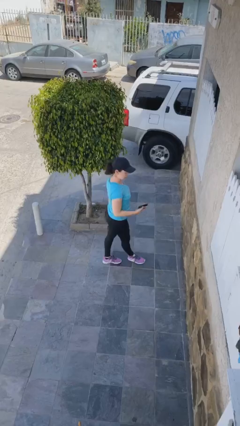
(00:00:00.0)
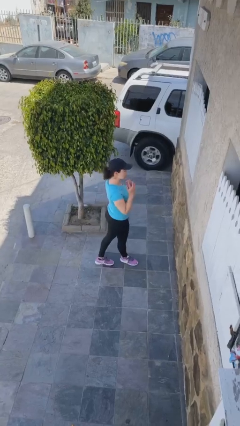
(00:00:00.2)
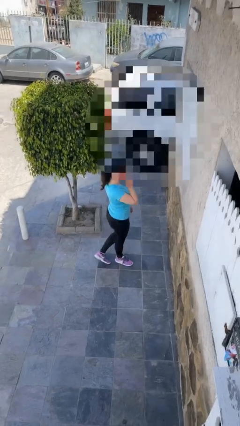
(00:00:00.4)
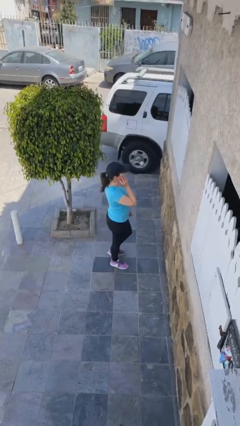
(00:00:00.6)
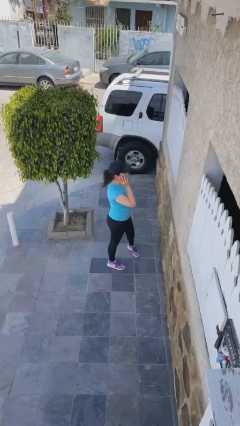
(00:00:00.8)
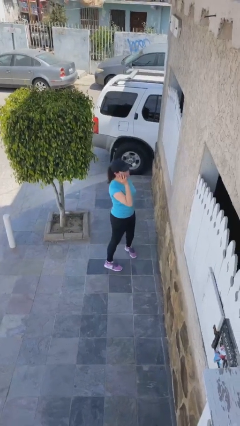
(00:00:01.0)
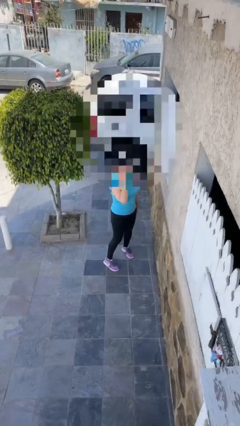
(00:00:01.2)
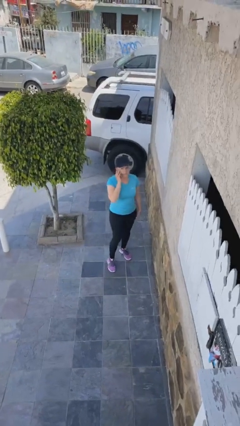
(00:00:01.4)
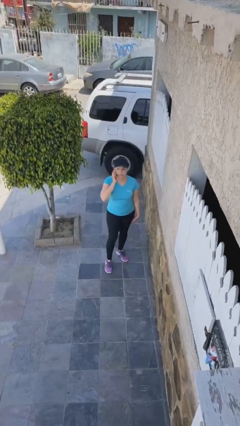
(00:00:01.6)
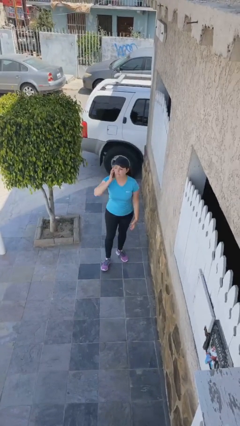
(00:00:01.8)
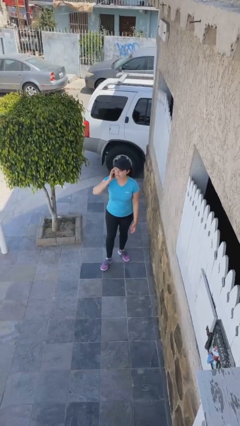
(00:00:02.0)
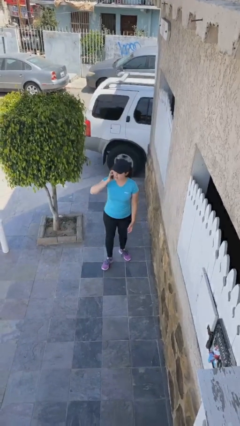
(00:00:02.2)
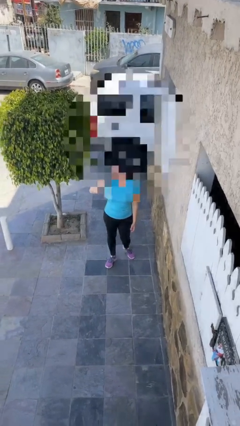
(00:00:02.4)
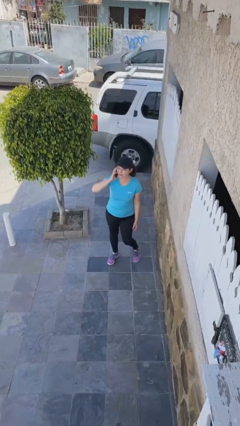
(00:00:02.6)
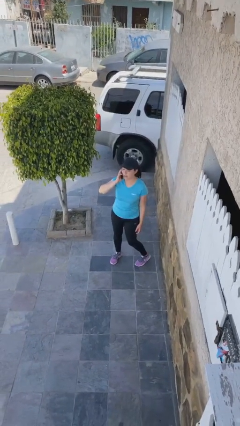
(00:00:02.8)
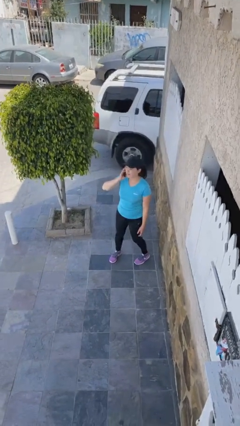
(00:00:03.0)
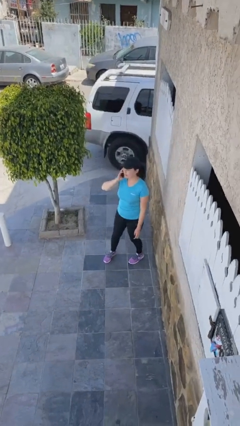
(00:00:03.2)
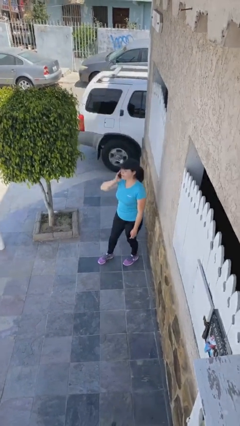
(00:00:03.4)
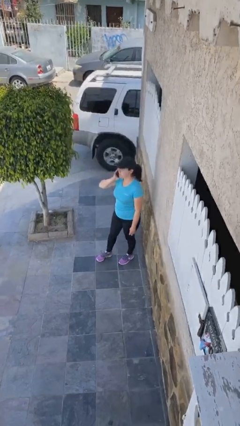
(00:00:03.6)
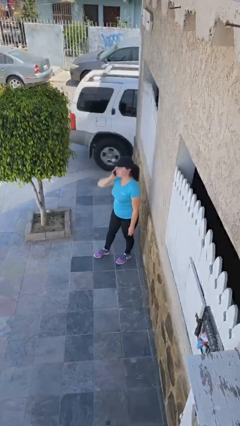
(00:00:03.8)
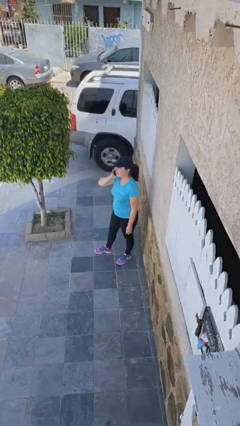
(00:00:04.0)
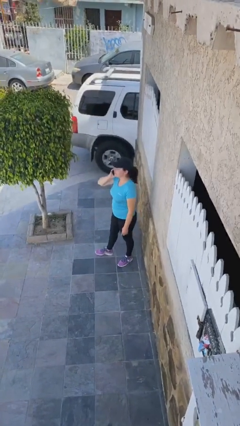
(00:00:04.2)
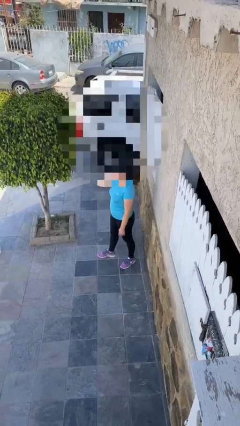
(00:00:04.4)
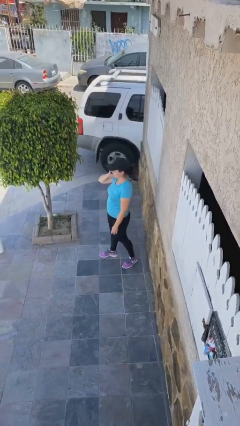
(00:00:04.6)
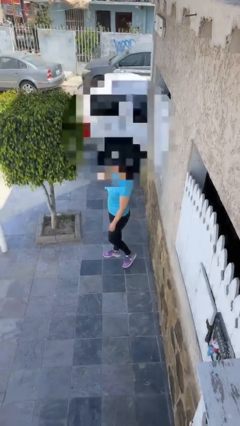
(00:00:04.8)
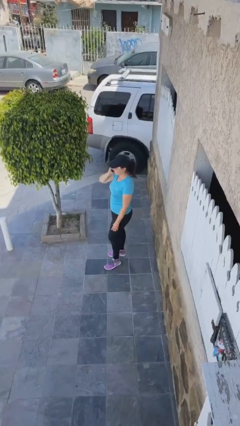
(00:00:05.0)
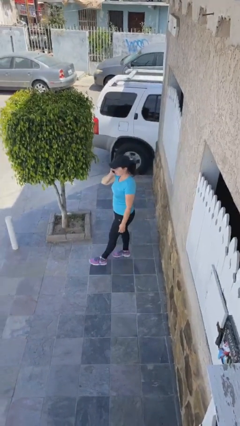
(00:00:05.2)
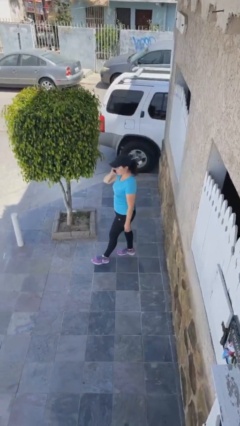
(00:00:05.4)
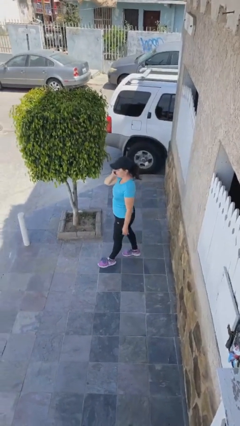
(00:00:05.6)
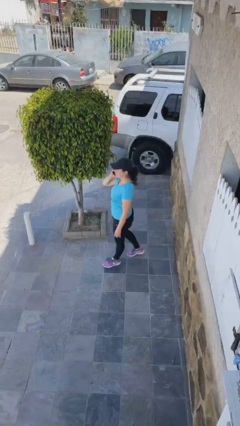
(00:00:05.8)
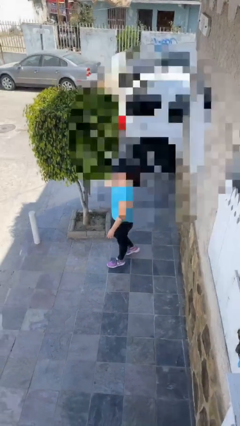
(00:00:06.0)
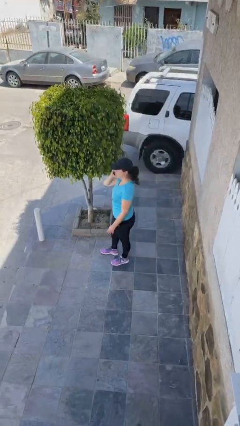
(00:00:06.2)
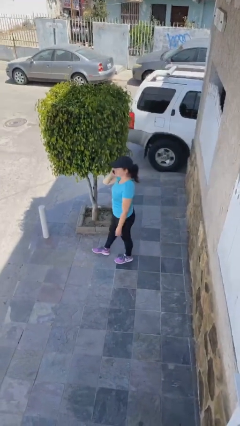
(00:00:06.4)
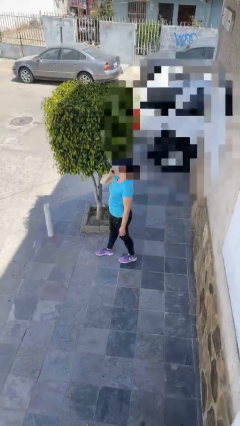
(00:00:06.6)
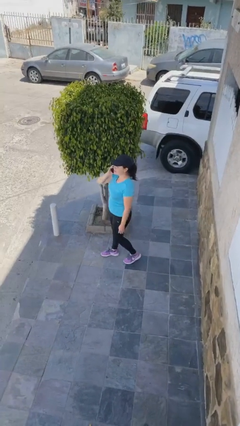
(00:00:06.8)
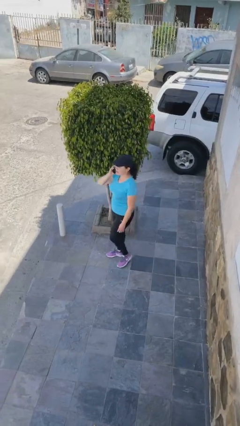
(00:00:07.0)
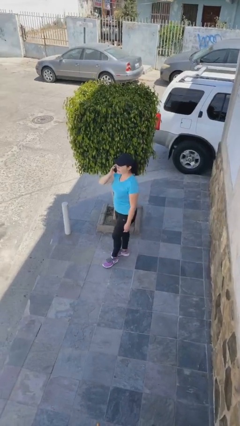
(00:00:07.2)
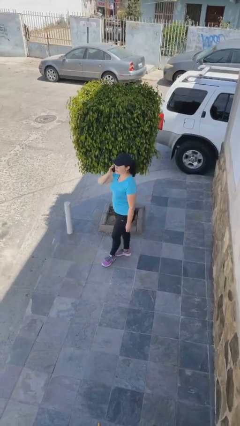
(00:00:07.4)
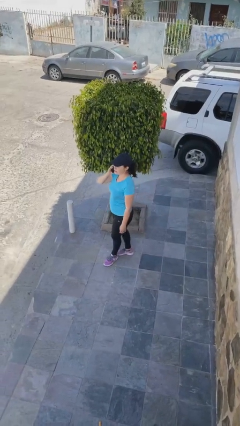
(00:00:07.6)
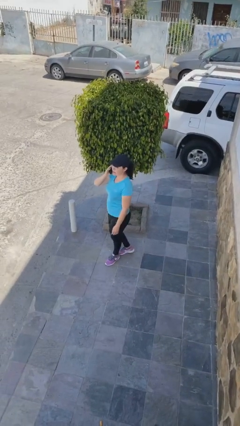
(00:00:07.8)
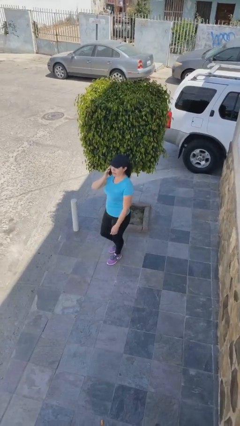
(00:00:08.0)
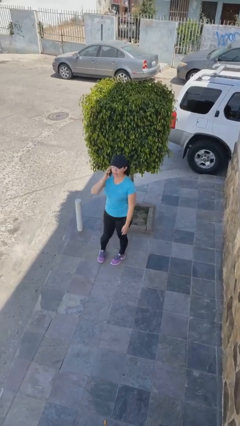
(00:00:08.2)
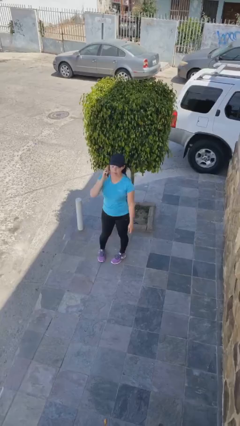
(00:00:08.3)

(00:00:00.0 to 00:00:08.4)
person talks on phone

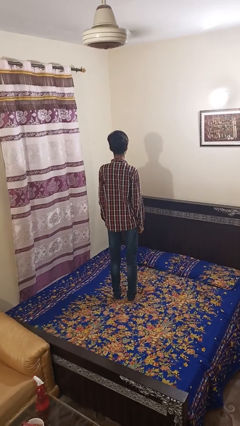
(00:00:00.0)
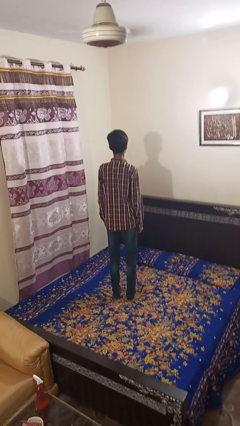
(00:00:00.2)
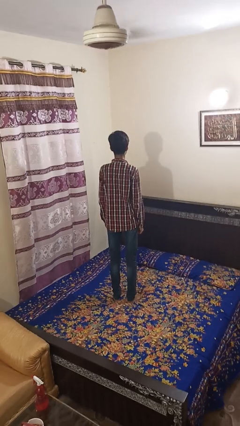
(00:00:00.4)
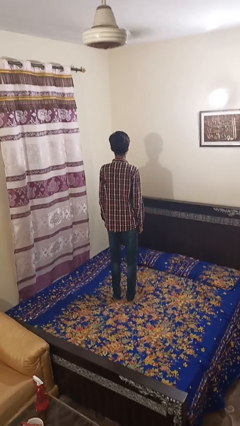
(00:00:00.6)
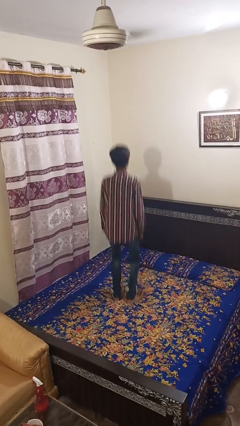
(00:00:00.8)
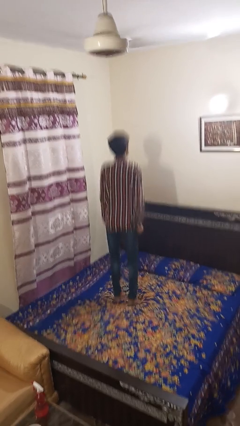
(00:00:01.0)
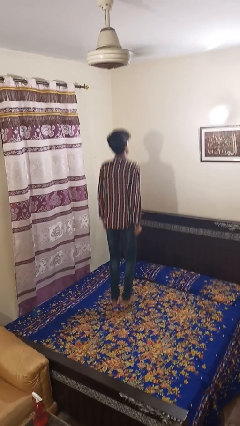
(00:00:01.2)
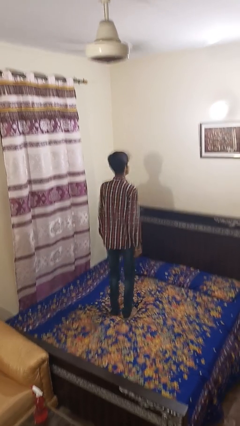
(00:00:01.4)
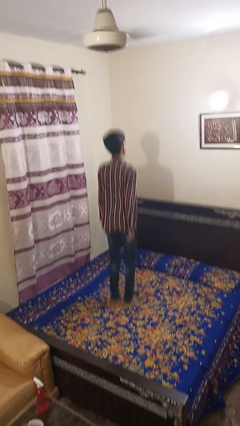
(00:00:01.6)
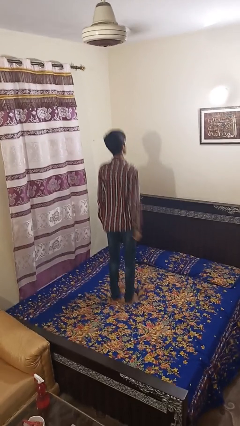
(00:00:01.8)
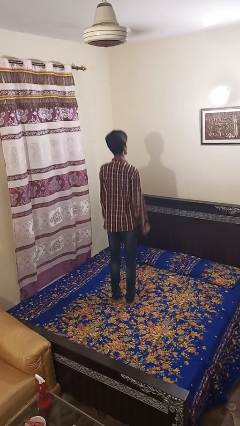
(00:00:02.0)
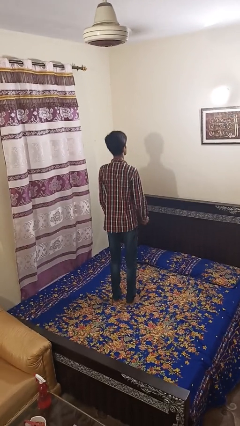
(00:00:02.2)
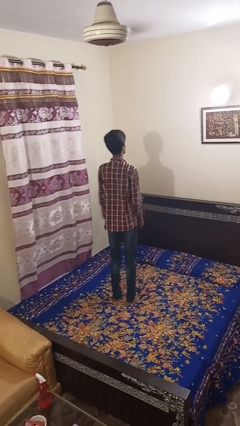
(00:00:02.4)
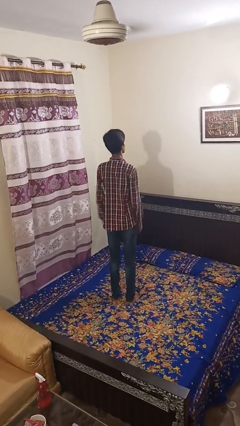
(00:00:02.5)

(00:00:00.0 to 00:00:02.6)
person jumps on bed

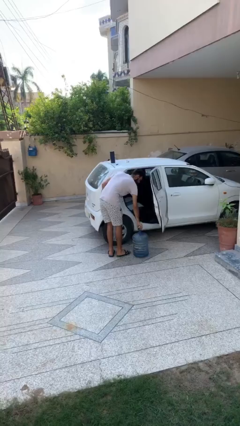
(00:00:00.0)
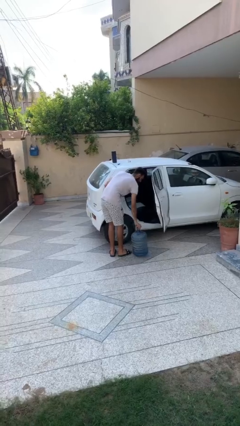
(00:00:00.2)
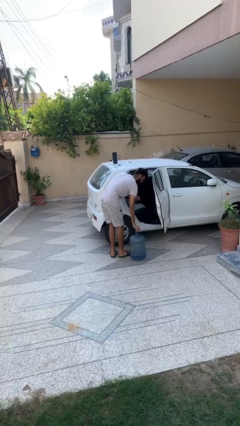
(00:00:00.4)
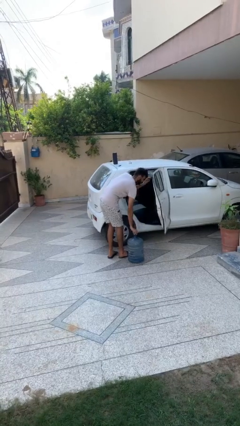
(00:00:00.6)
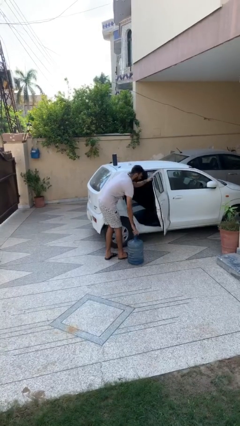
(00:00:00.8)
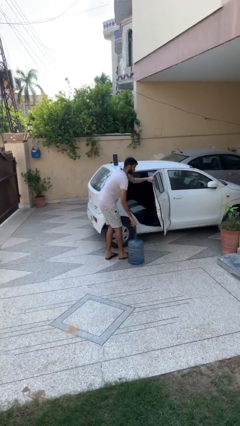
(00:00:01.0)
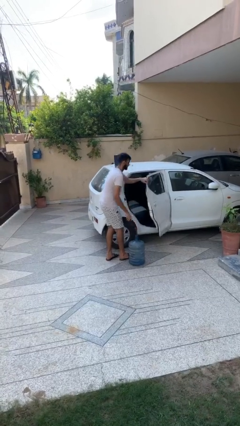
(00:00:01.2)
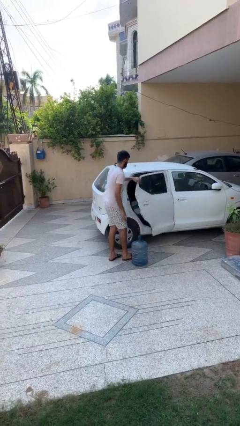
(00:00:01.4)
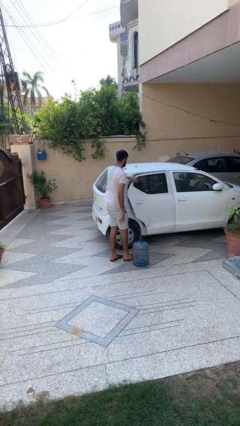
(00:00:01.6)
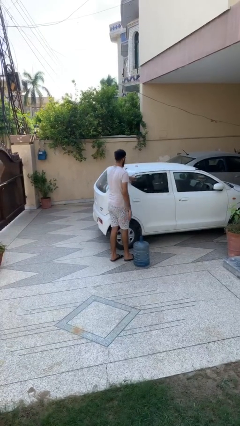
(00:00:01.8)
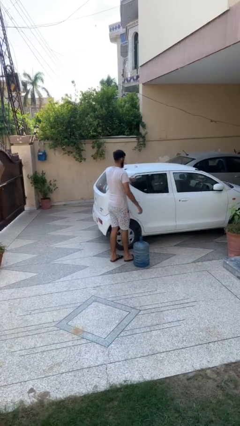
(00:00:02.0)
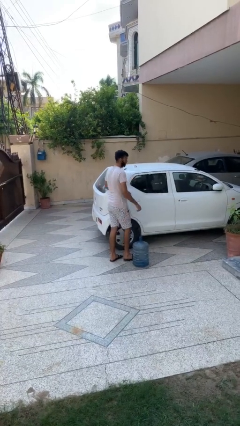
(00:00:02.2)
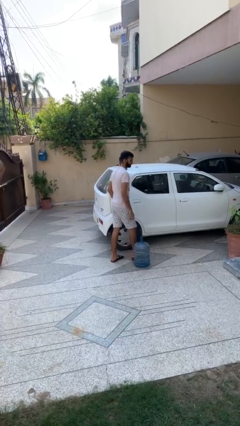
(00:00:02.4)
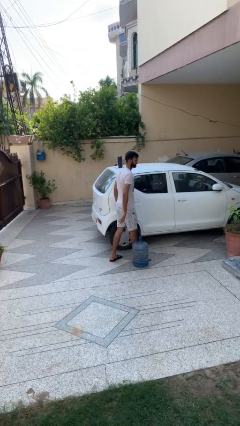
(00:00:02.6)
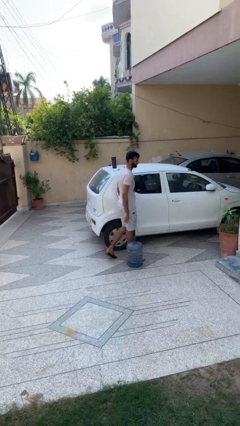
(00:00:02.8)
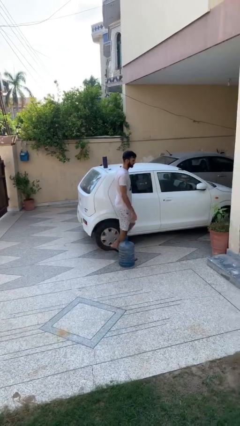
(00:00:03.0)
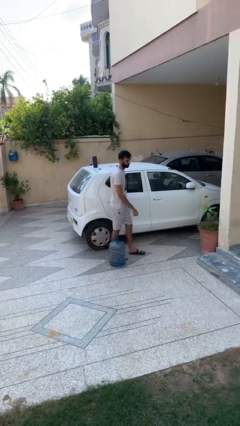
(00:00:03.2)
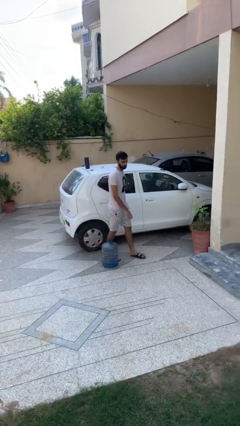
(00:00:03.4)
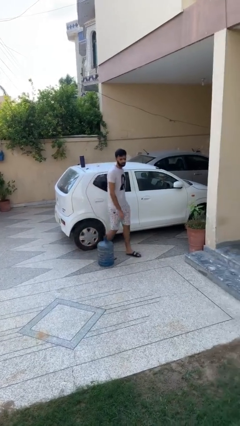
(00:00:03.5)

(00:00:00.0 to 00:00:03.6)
person closes car door

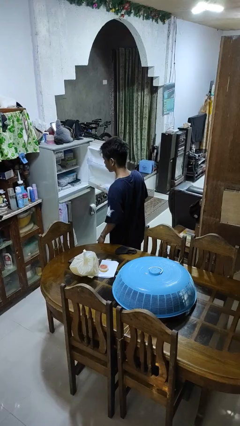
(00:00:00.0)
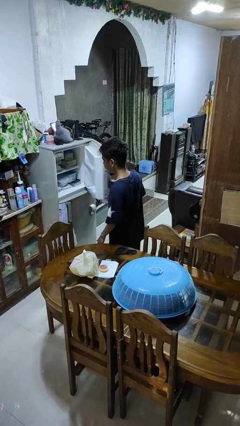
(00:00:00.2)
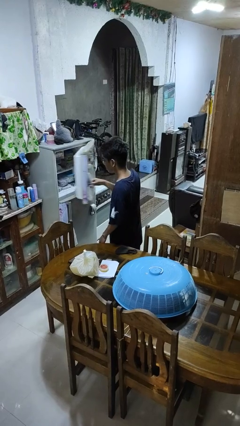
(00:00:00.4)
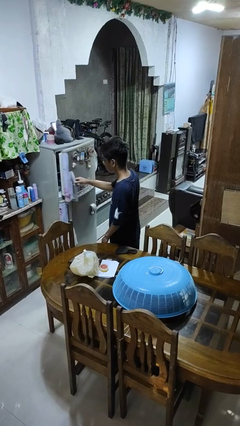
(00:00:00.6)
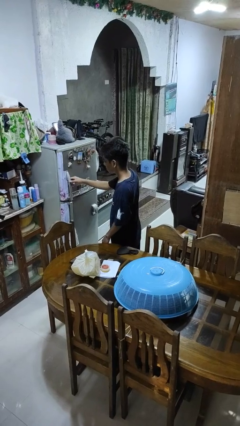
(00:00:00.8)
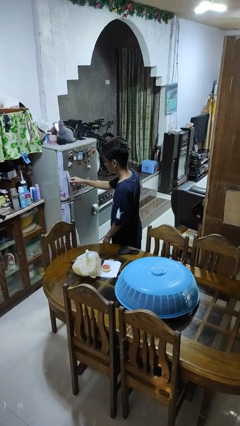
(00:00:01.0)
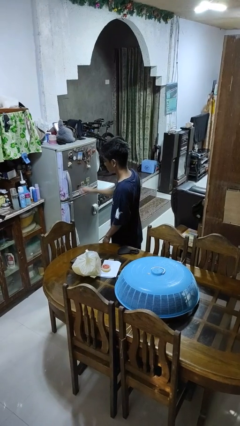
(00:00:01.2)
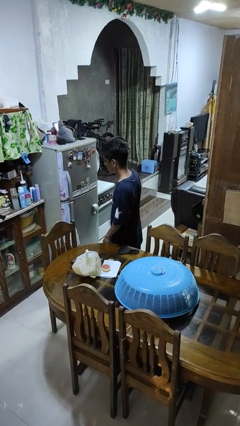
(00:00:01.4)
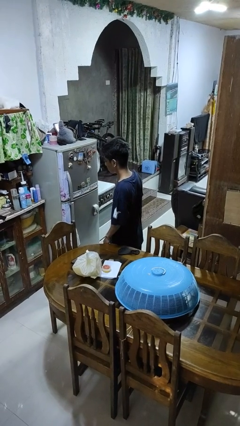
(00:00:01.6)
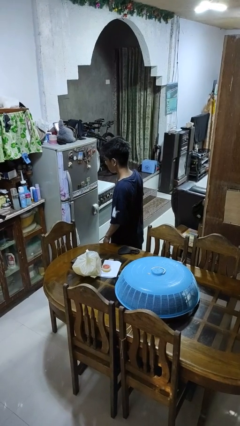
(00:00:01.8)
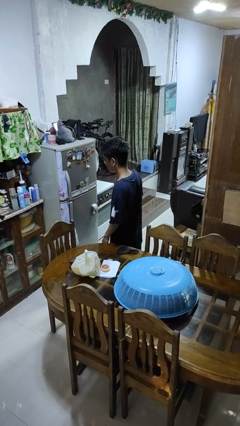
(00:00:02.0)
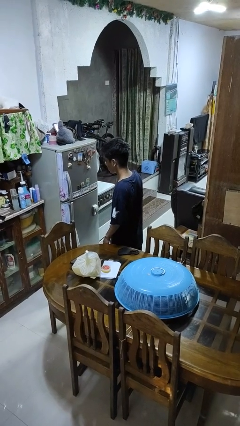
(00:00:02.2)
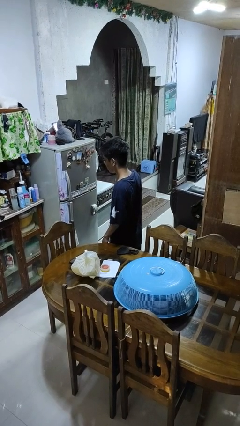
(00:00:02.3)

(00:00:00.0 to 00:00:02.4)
person closes refrigerator

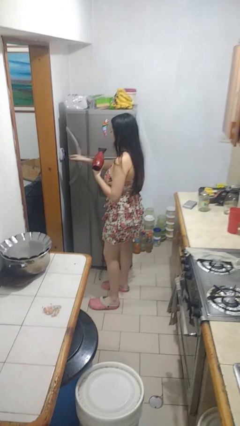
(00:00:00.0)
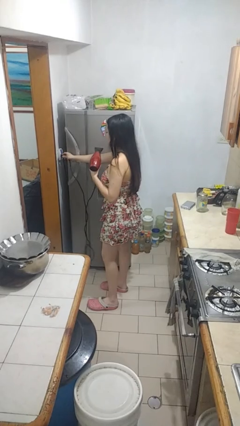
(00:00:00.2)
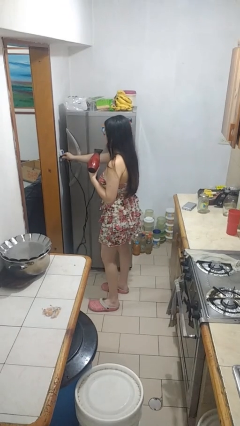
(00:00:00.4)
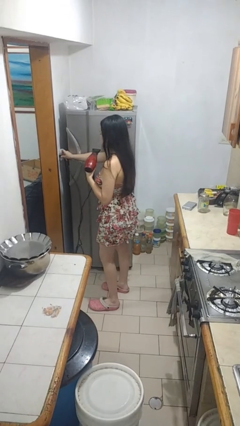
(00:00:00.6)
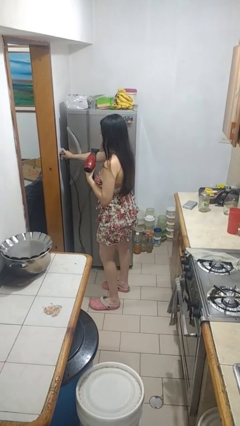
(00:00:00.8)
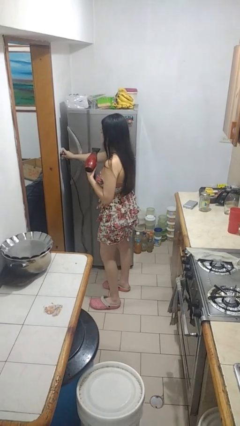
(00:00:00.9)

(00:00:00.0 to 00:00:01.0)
person plugs into electrical socket
